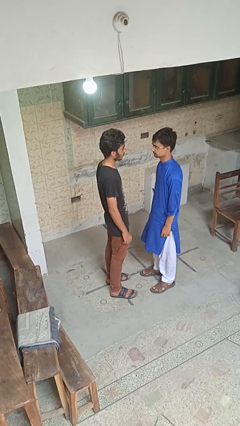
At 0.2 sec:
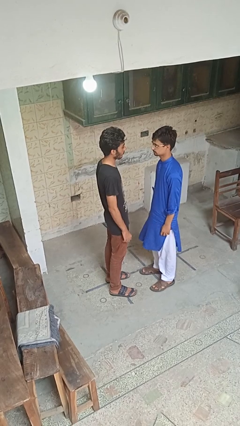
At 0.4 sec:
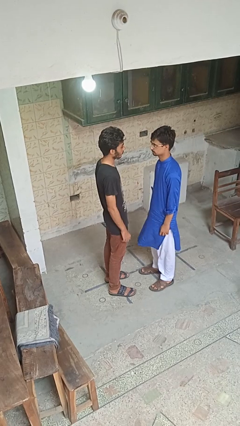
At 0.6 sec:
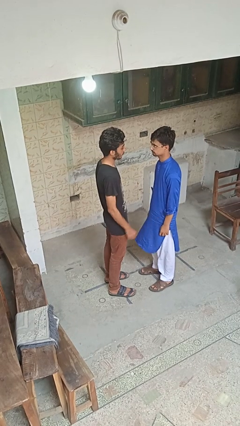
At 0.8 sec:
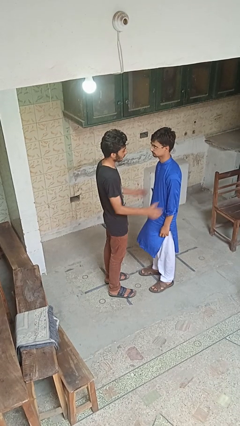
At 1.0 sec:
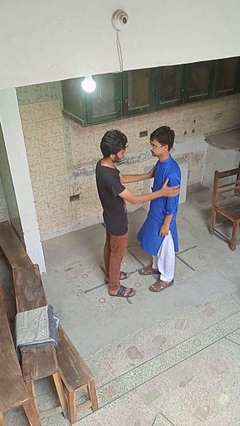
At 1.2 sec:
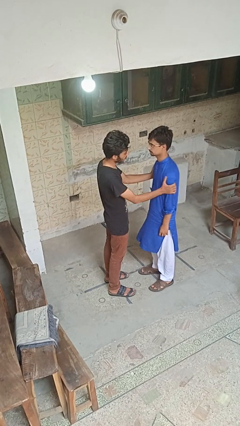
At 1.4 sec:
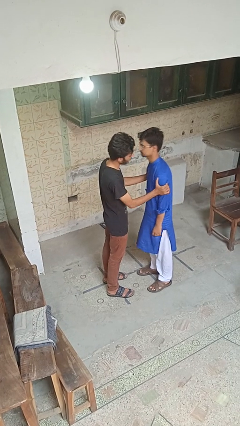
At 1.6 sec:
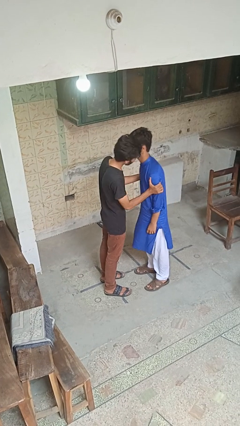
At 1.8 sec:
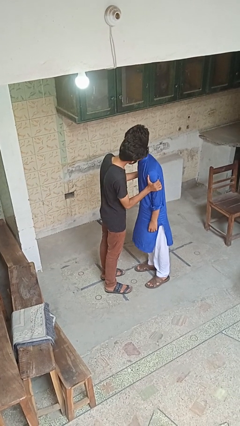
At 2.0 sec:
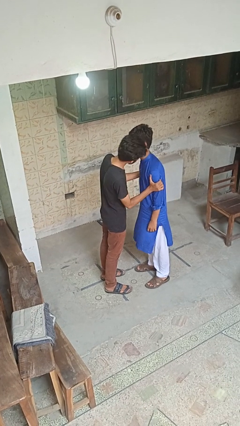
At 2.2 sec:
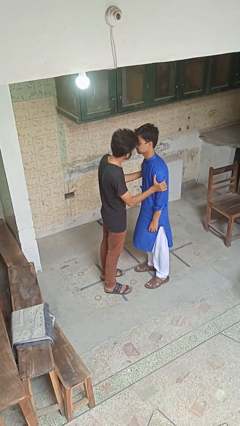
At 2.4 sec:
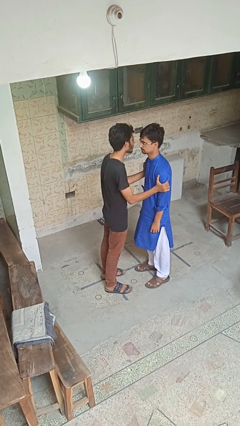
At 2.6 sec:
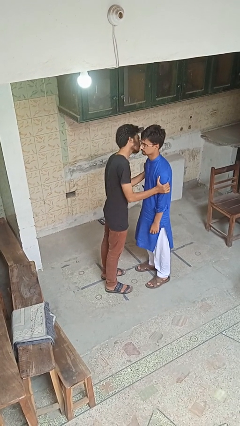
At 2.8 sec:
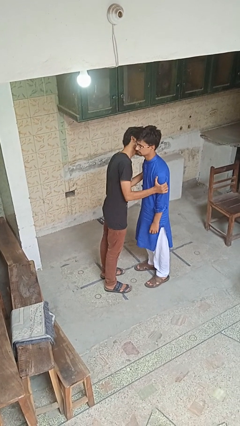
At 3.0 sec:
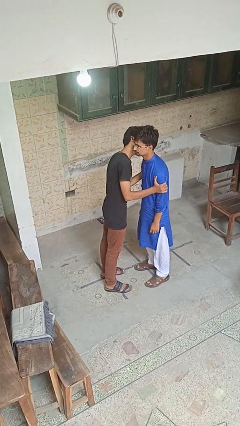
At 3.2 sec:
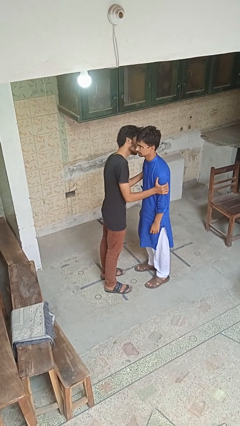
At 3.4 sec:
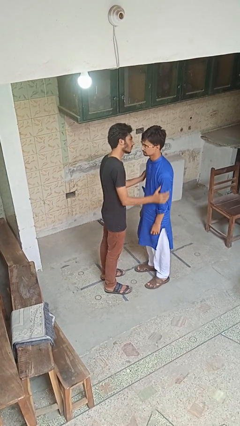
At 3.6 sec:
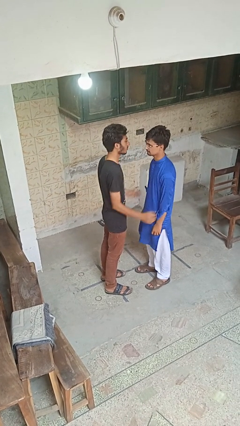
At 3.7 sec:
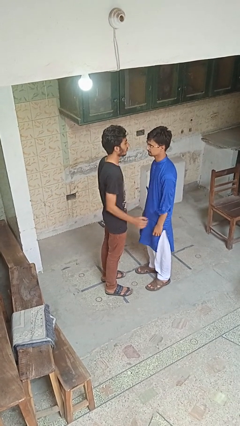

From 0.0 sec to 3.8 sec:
person kisses cheek of person

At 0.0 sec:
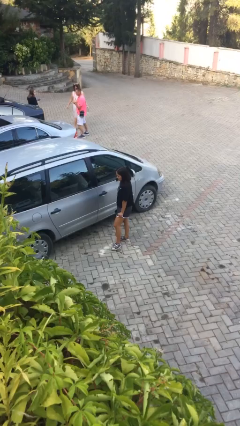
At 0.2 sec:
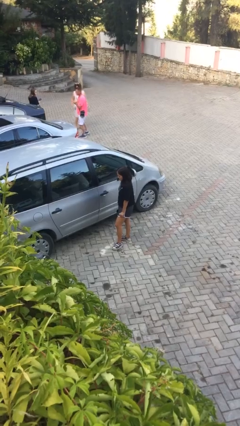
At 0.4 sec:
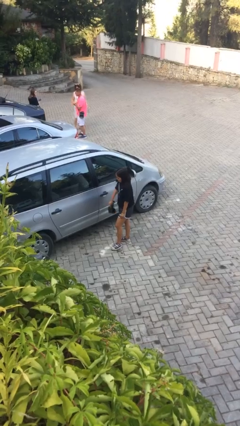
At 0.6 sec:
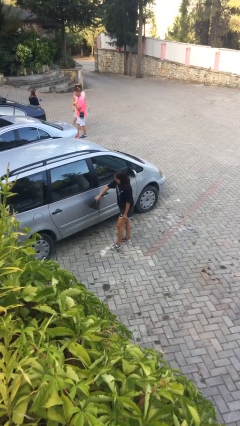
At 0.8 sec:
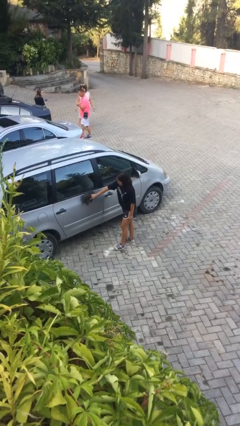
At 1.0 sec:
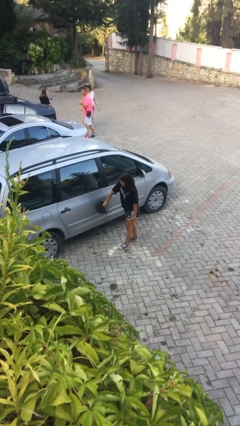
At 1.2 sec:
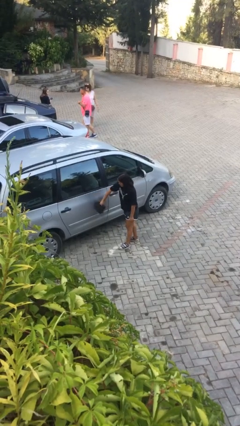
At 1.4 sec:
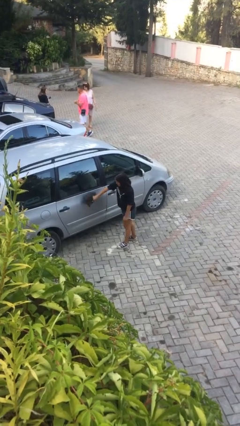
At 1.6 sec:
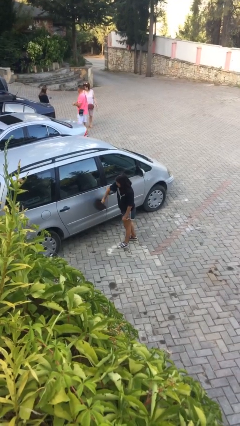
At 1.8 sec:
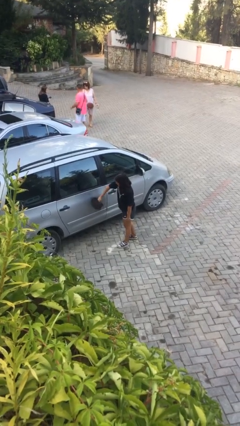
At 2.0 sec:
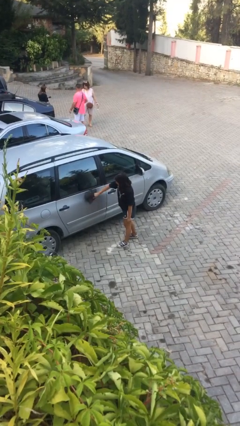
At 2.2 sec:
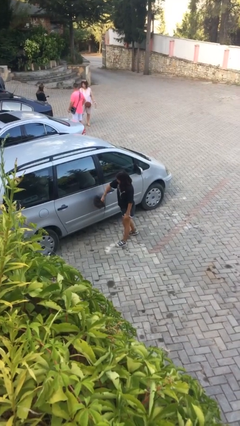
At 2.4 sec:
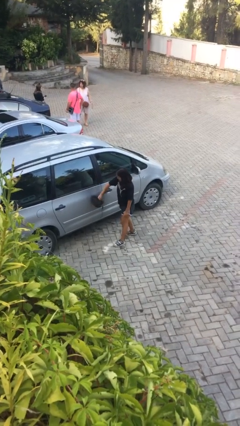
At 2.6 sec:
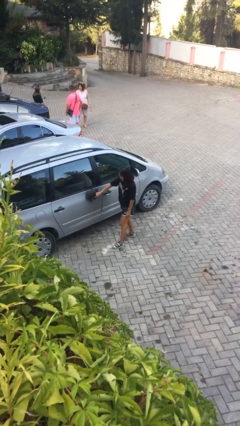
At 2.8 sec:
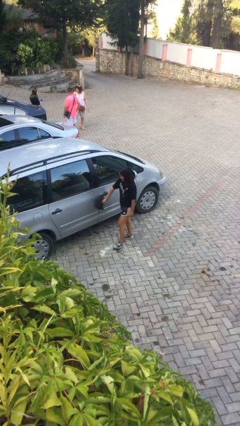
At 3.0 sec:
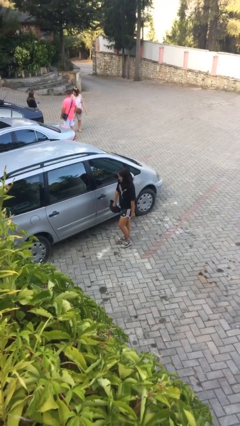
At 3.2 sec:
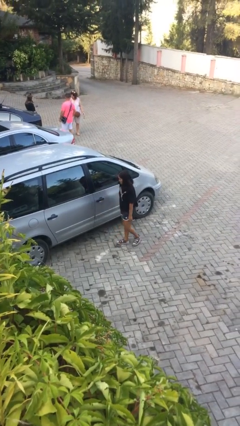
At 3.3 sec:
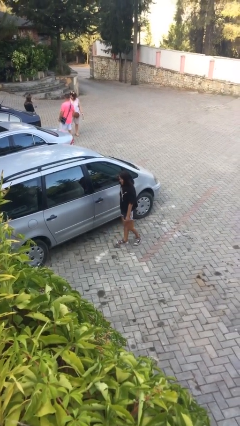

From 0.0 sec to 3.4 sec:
person polishes car with rag

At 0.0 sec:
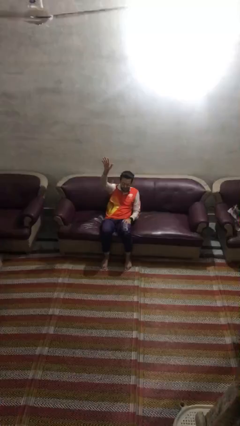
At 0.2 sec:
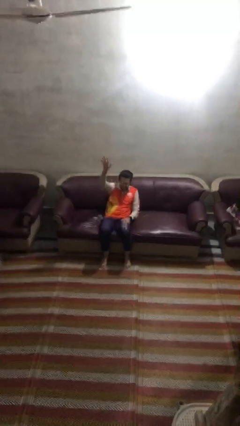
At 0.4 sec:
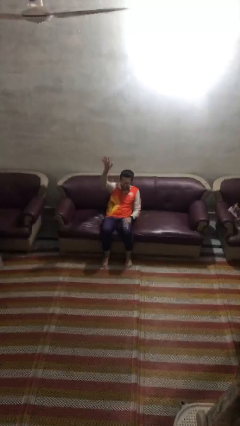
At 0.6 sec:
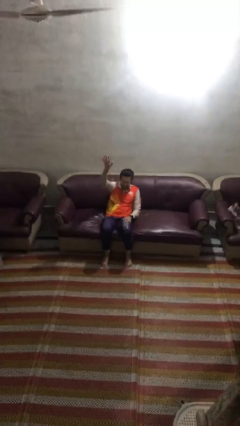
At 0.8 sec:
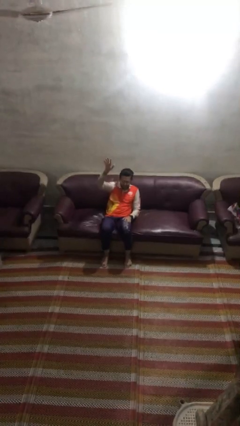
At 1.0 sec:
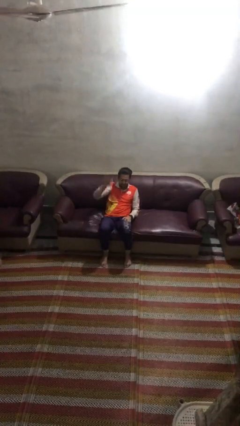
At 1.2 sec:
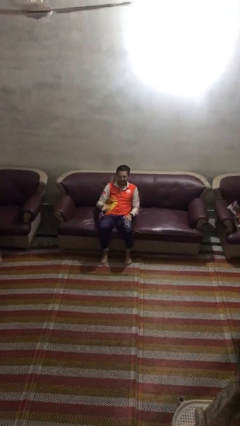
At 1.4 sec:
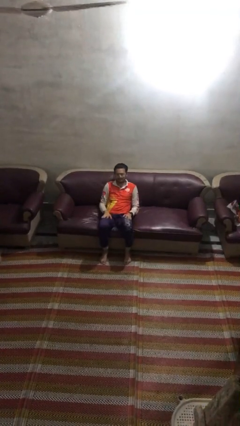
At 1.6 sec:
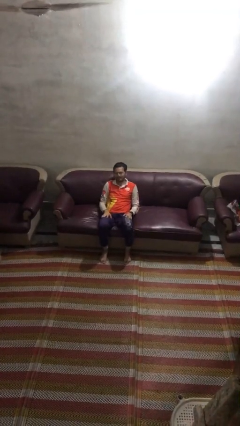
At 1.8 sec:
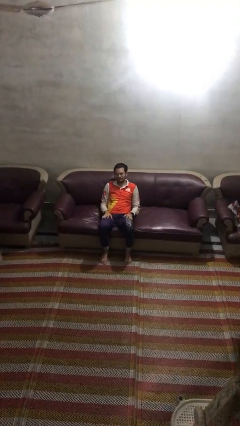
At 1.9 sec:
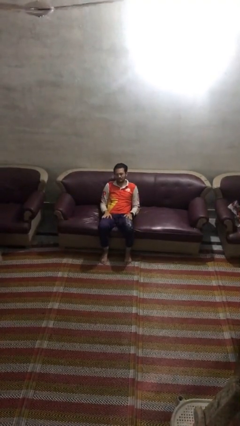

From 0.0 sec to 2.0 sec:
person gestures lower hand

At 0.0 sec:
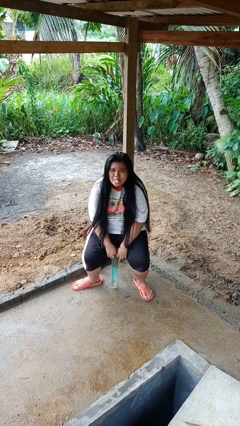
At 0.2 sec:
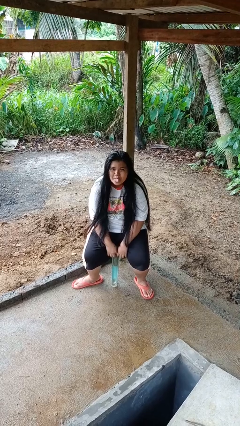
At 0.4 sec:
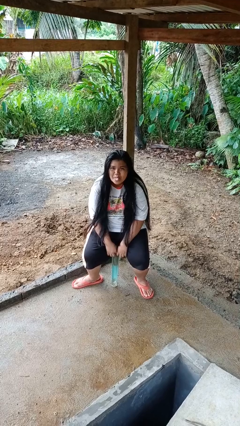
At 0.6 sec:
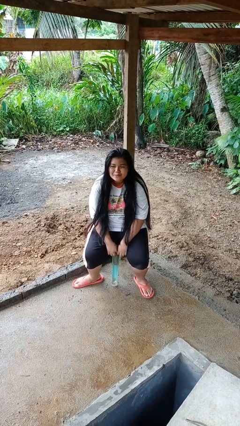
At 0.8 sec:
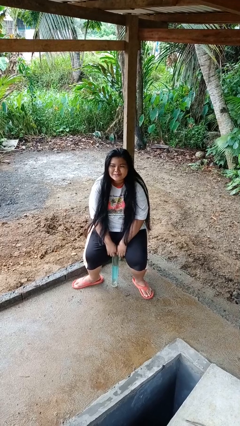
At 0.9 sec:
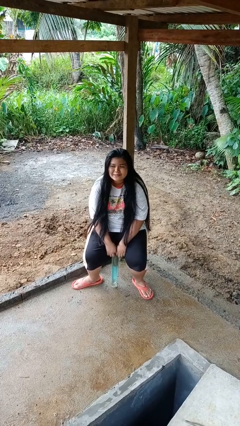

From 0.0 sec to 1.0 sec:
person sticks out tongue

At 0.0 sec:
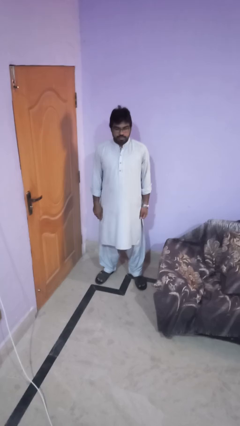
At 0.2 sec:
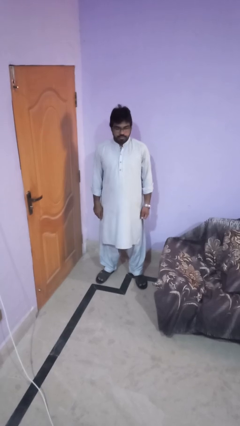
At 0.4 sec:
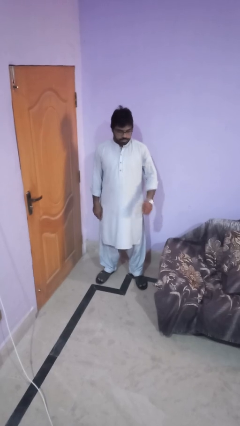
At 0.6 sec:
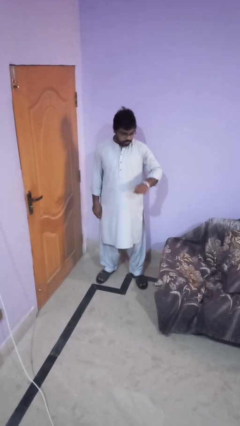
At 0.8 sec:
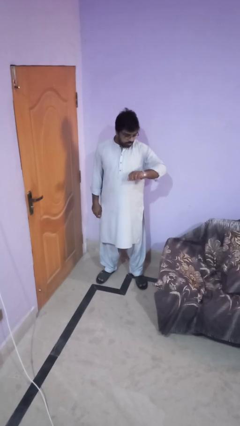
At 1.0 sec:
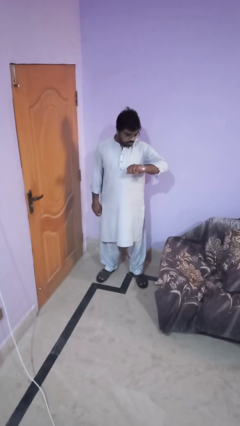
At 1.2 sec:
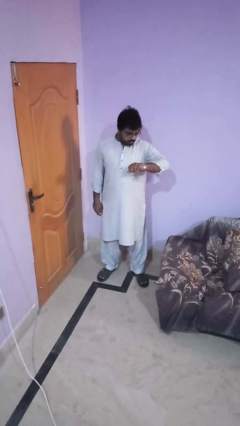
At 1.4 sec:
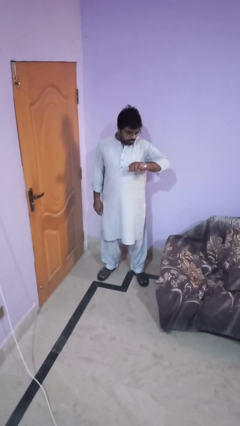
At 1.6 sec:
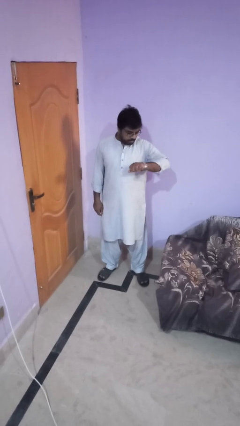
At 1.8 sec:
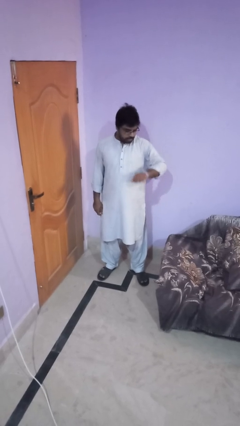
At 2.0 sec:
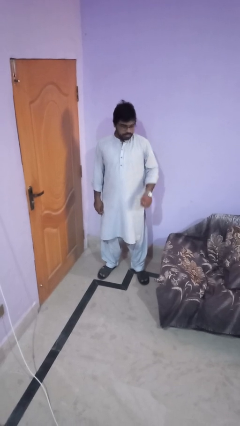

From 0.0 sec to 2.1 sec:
person looks at wristwatch

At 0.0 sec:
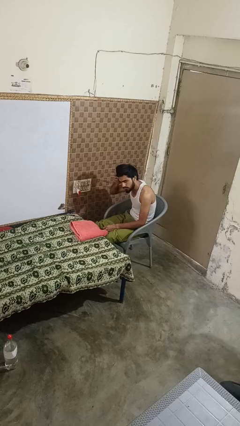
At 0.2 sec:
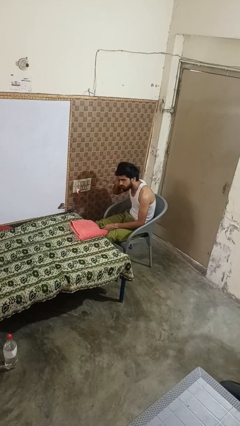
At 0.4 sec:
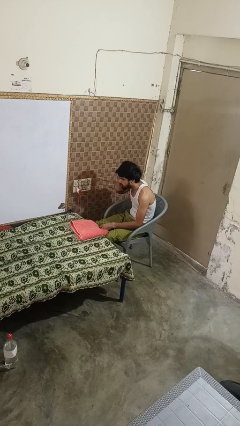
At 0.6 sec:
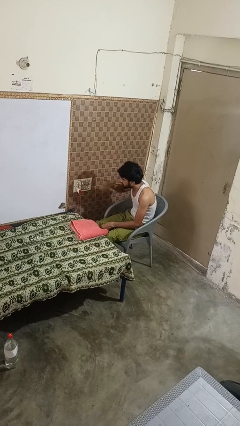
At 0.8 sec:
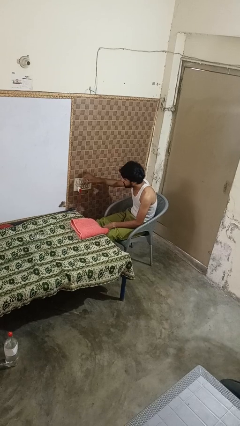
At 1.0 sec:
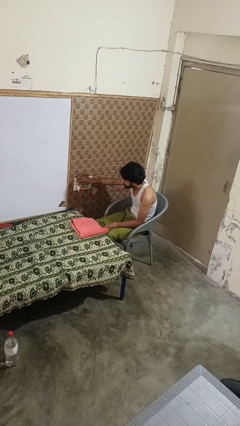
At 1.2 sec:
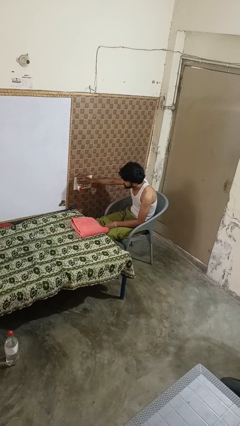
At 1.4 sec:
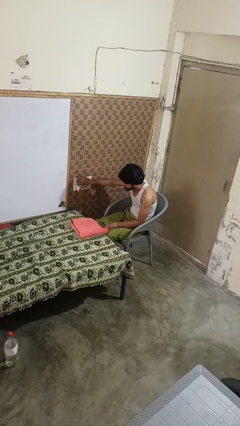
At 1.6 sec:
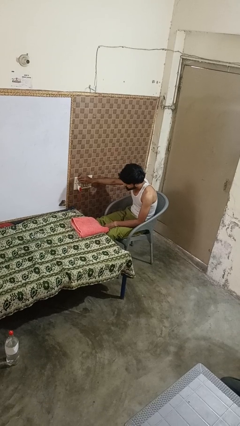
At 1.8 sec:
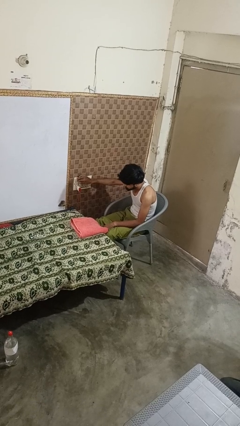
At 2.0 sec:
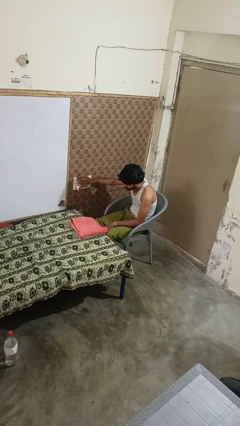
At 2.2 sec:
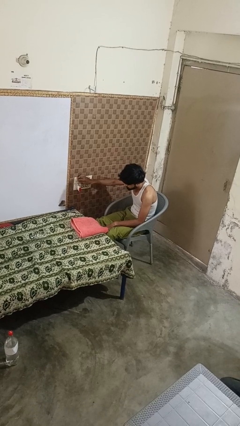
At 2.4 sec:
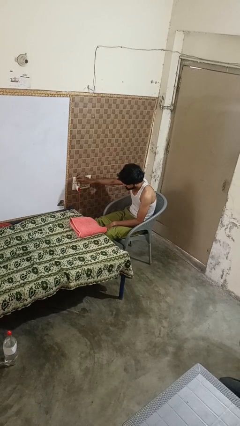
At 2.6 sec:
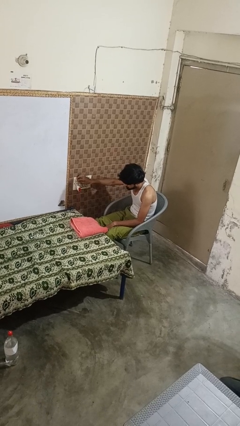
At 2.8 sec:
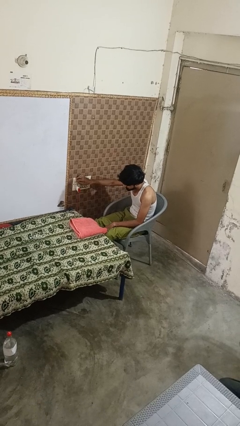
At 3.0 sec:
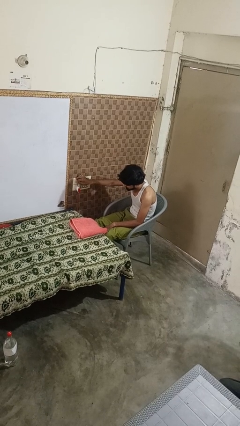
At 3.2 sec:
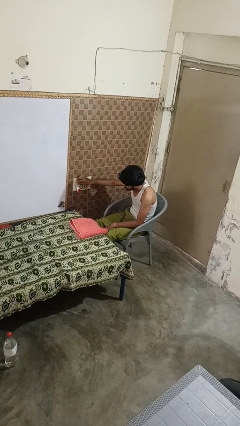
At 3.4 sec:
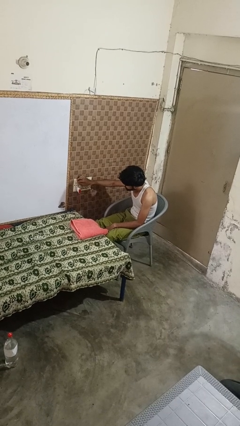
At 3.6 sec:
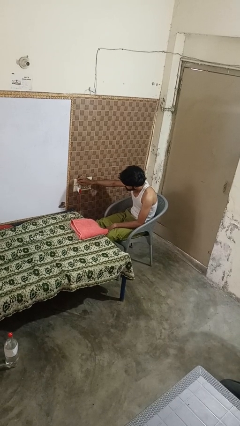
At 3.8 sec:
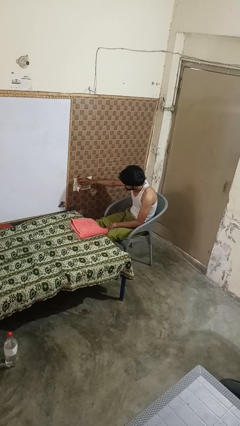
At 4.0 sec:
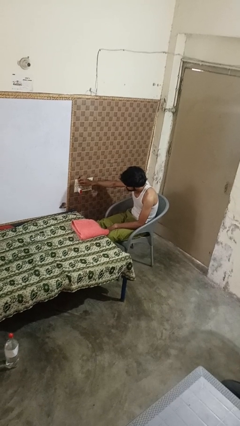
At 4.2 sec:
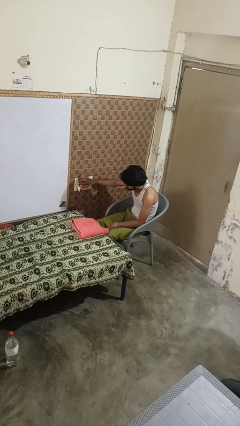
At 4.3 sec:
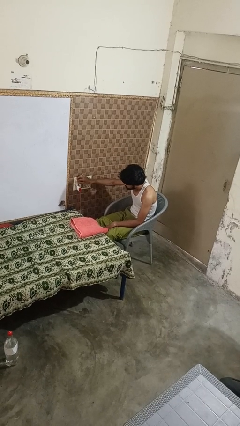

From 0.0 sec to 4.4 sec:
person adjusts thermostat

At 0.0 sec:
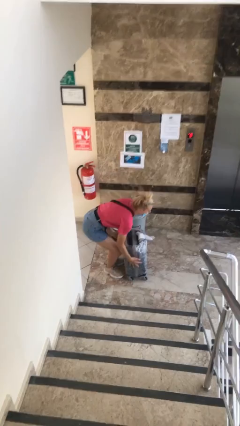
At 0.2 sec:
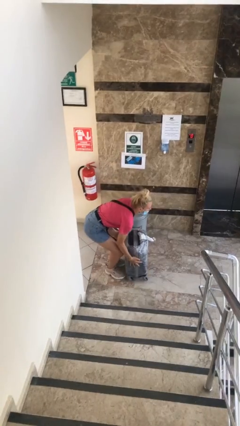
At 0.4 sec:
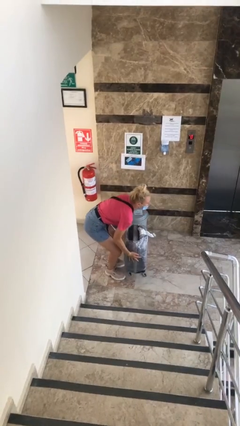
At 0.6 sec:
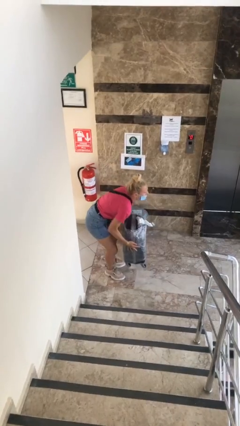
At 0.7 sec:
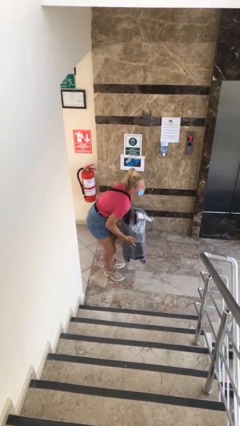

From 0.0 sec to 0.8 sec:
person picks up object from floor
